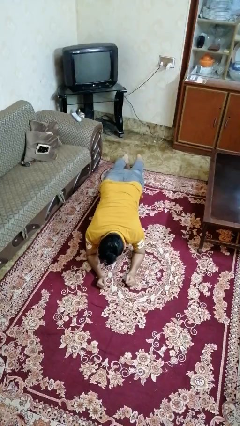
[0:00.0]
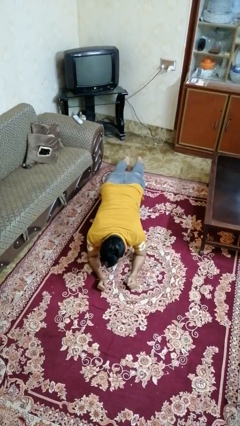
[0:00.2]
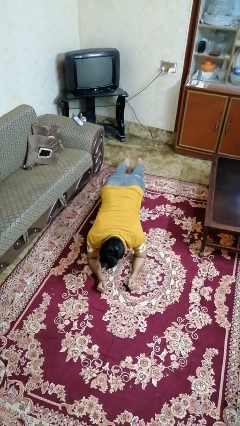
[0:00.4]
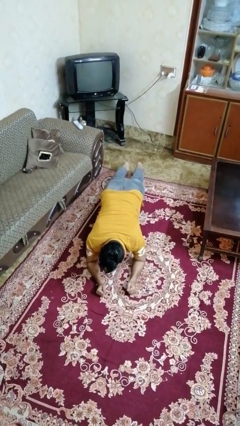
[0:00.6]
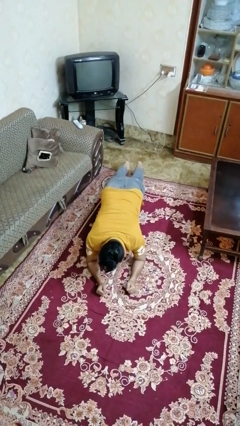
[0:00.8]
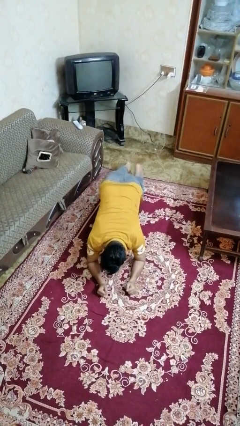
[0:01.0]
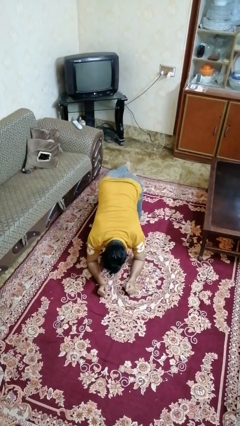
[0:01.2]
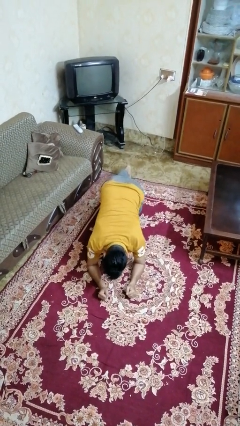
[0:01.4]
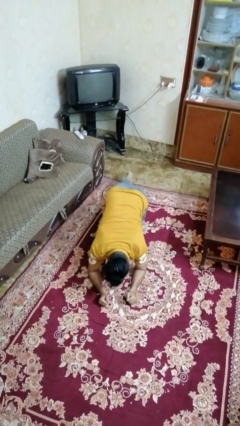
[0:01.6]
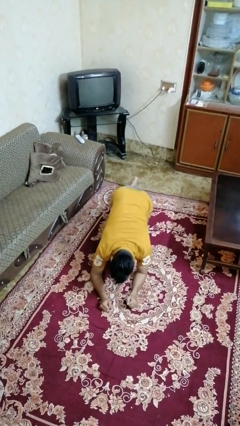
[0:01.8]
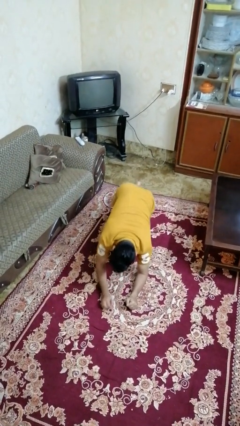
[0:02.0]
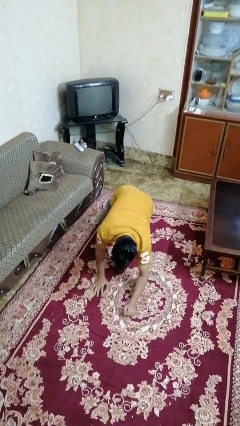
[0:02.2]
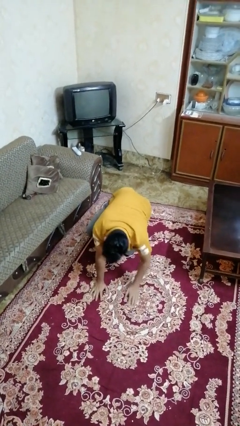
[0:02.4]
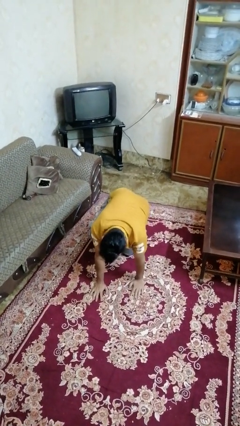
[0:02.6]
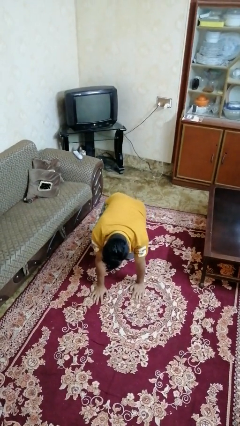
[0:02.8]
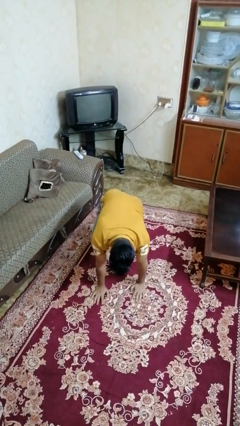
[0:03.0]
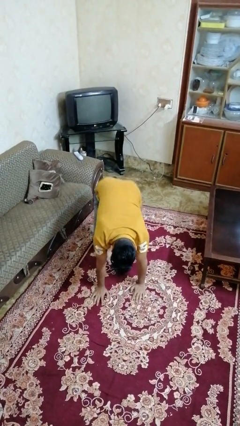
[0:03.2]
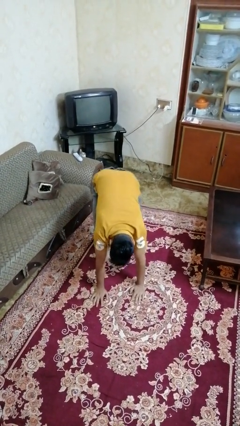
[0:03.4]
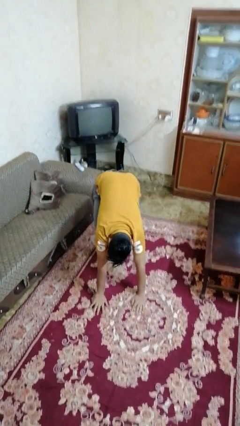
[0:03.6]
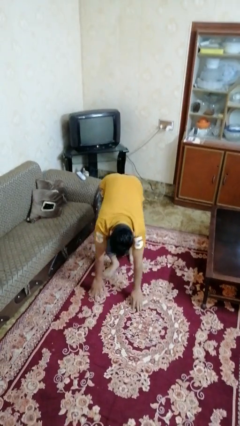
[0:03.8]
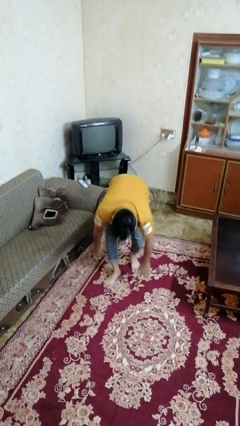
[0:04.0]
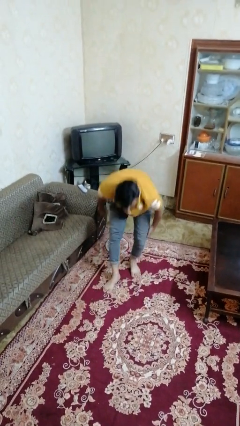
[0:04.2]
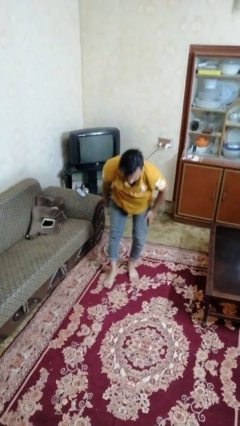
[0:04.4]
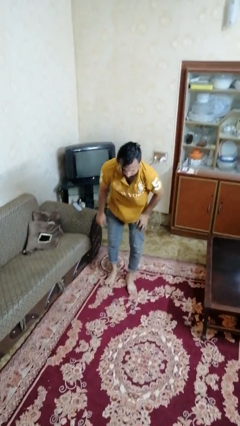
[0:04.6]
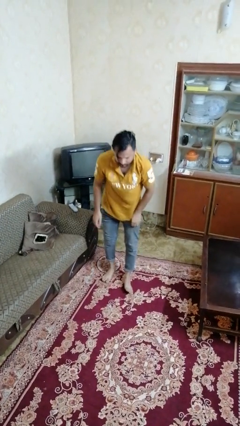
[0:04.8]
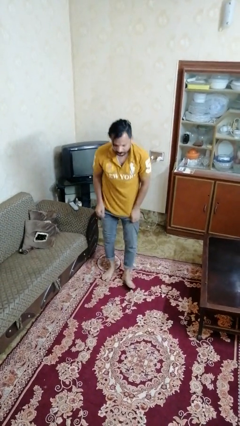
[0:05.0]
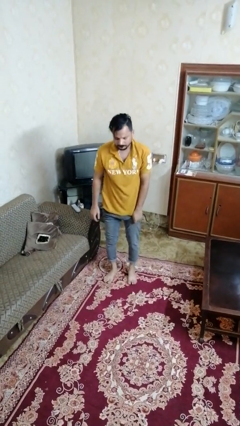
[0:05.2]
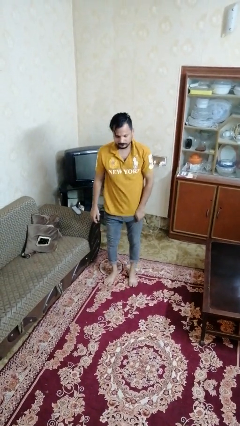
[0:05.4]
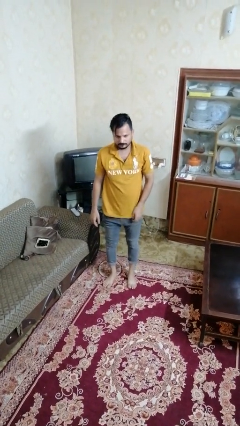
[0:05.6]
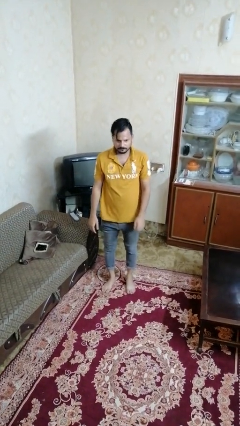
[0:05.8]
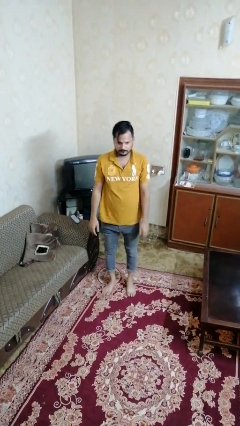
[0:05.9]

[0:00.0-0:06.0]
person stands up from floor

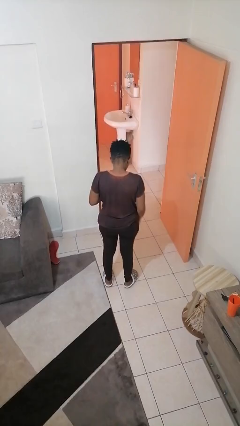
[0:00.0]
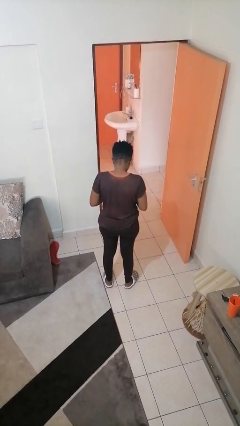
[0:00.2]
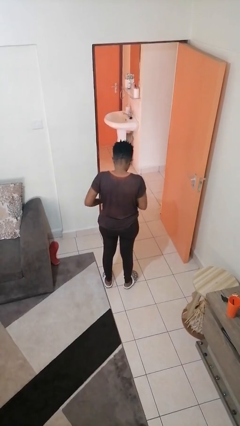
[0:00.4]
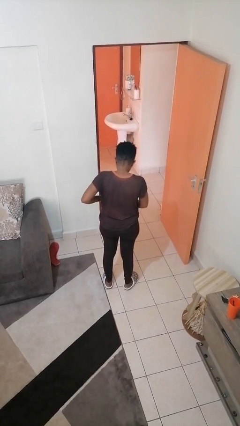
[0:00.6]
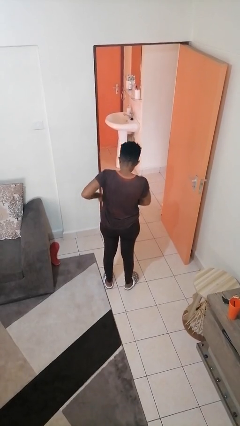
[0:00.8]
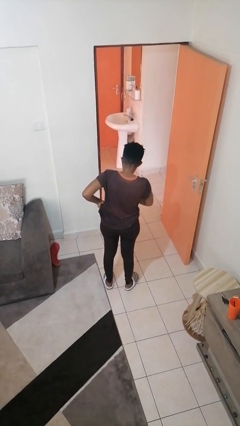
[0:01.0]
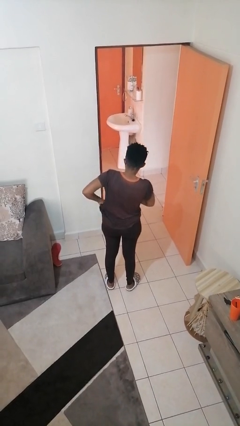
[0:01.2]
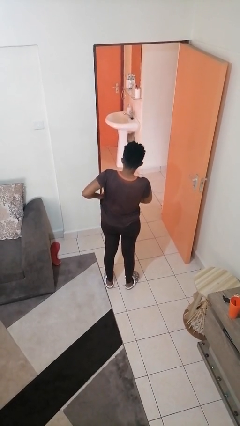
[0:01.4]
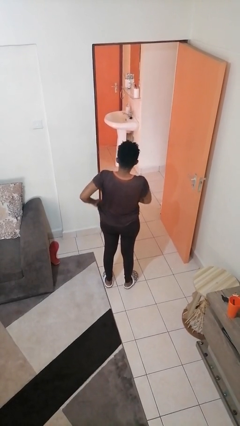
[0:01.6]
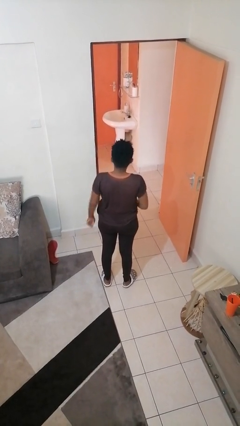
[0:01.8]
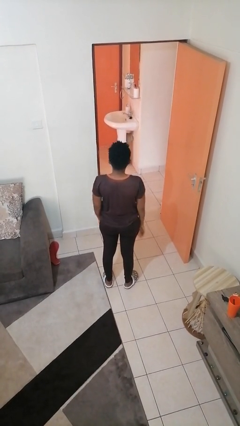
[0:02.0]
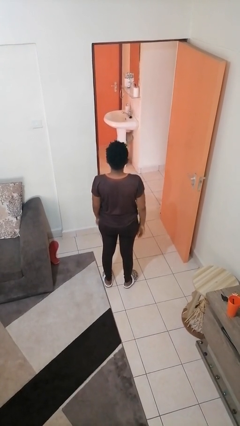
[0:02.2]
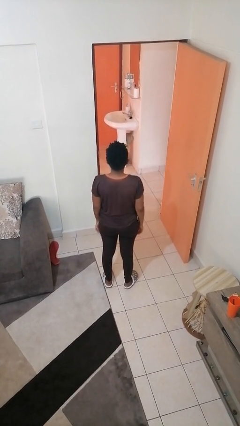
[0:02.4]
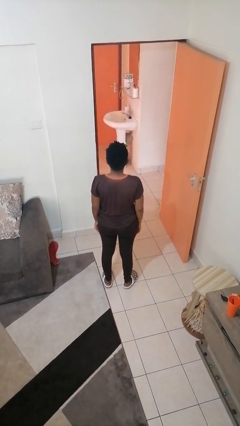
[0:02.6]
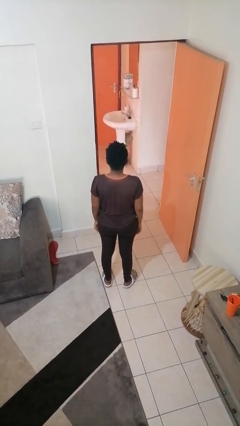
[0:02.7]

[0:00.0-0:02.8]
person puts phone into pocket

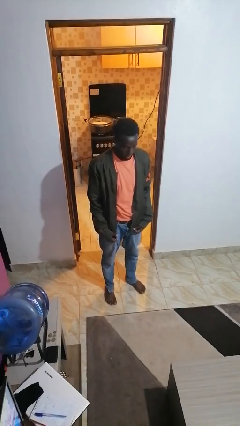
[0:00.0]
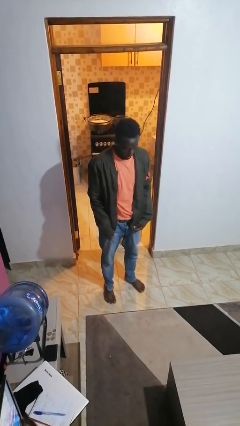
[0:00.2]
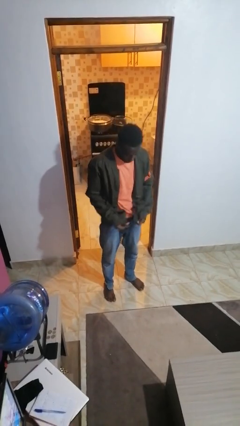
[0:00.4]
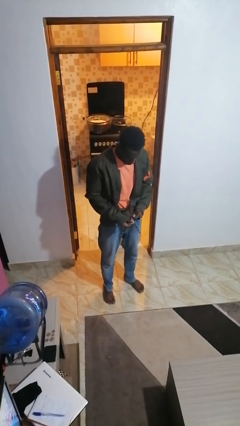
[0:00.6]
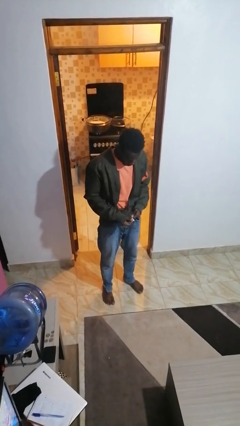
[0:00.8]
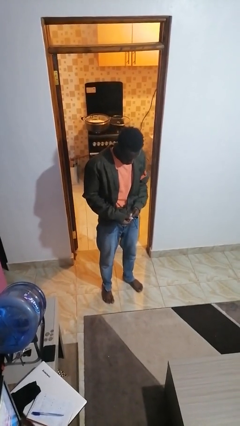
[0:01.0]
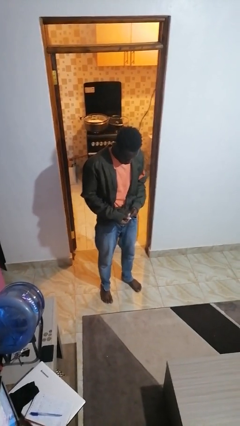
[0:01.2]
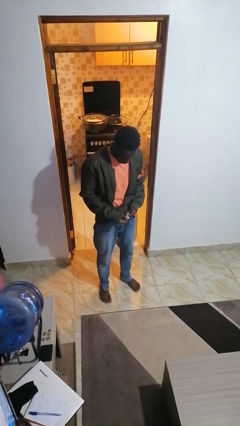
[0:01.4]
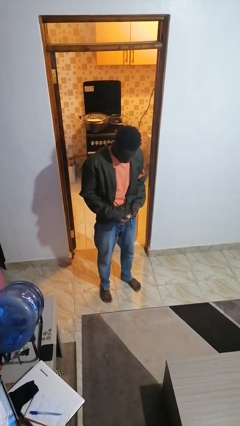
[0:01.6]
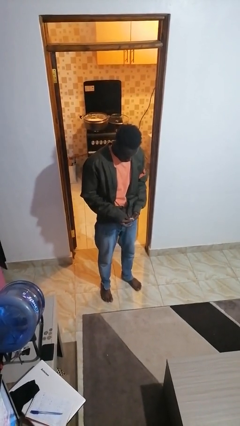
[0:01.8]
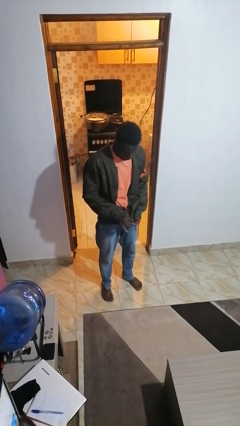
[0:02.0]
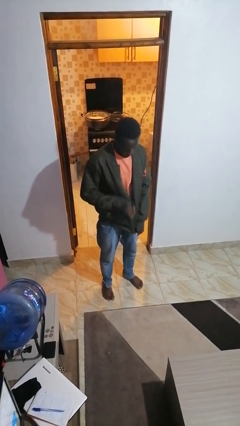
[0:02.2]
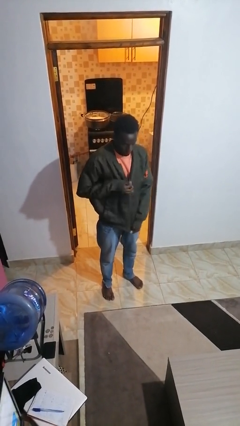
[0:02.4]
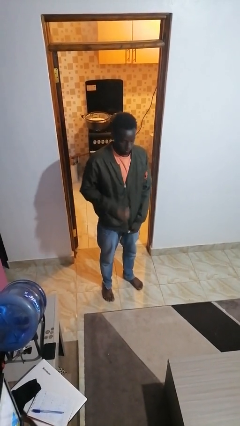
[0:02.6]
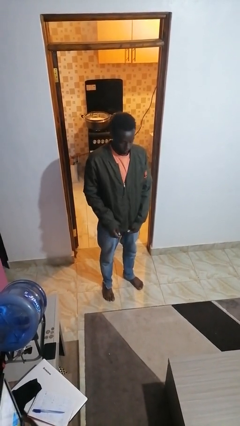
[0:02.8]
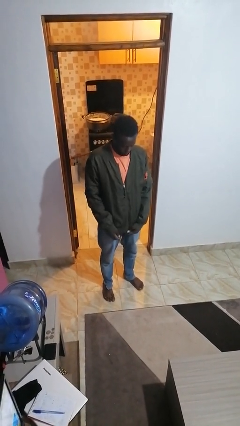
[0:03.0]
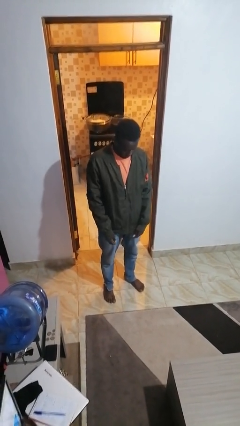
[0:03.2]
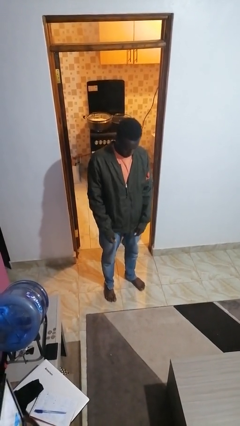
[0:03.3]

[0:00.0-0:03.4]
person zips up jacket

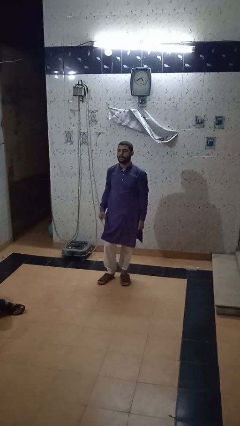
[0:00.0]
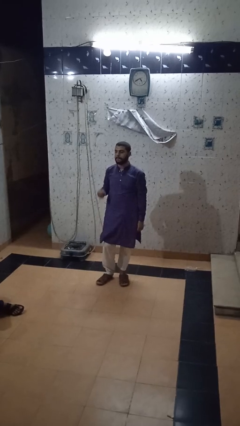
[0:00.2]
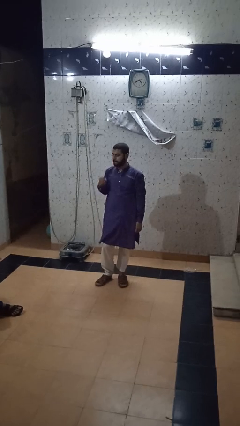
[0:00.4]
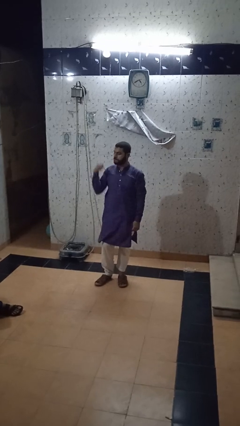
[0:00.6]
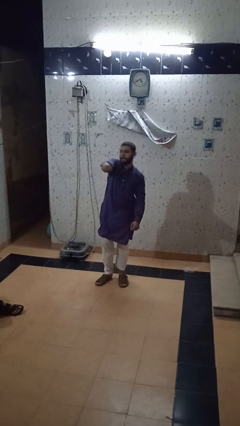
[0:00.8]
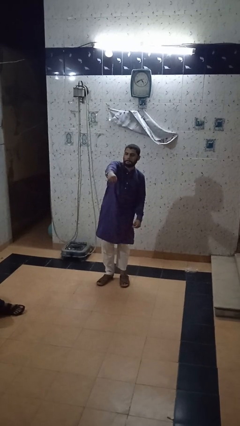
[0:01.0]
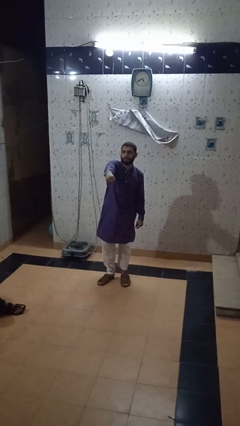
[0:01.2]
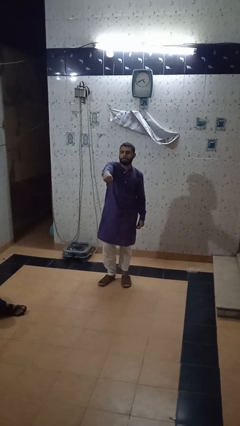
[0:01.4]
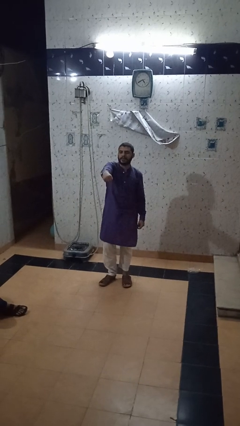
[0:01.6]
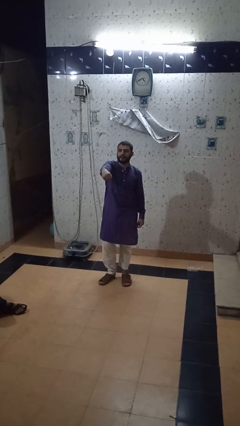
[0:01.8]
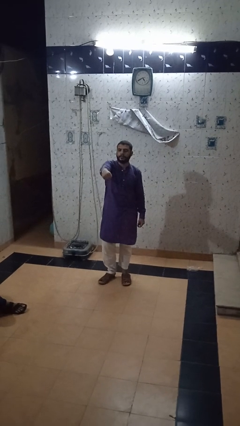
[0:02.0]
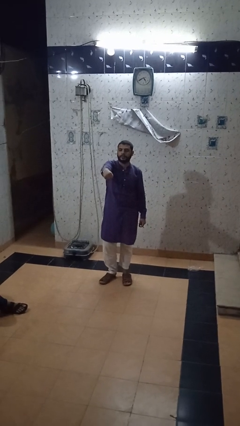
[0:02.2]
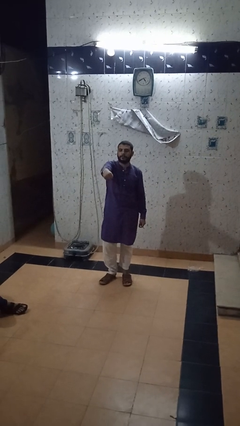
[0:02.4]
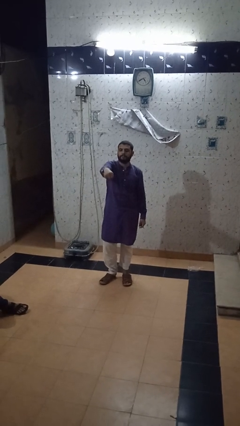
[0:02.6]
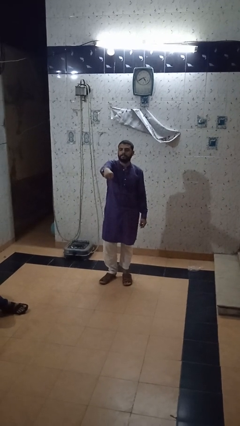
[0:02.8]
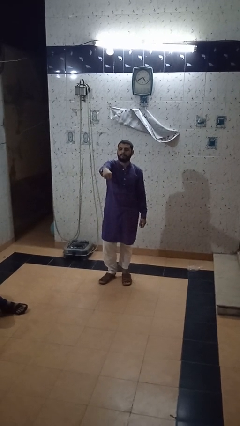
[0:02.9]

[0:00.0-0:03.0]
person punches

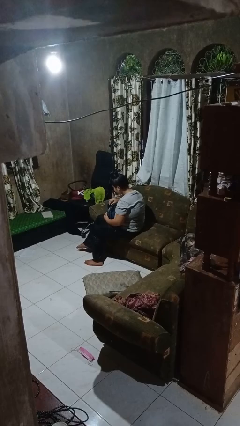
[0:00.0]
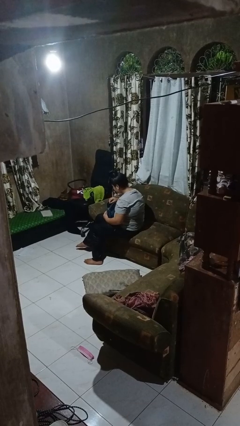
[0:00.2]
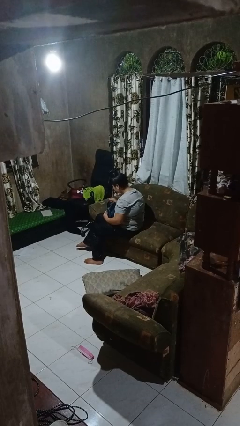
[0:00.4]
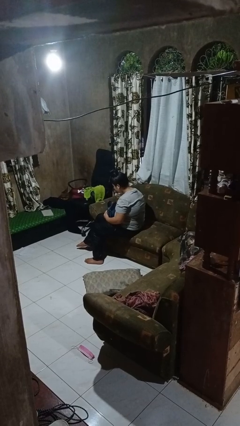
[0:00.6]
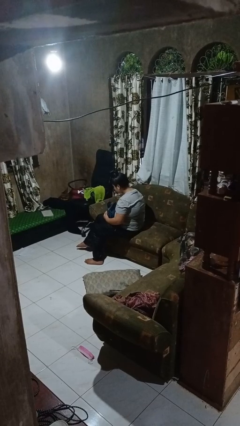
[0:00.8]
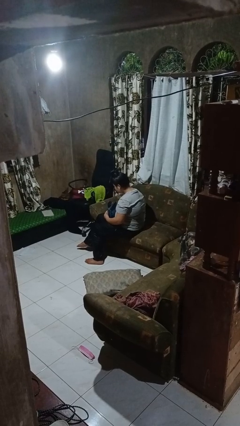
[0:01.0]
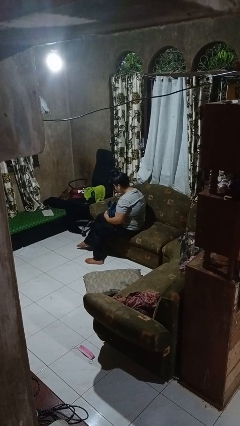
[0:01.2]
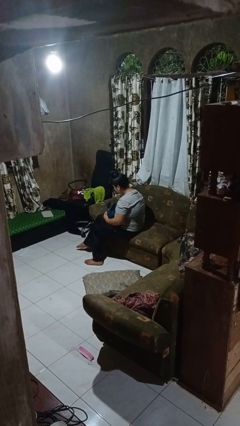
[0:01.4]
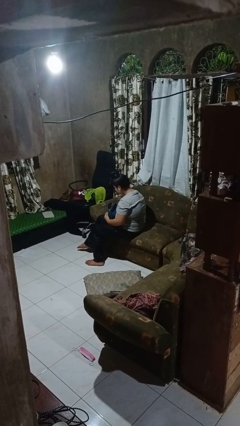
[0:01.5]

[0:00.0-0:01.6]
person puts object into purse

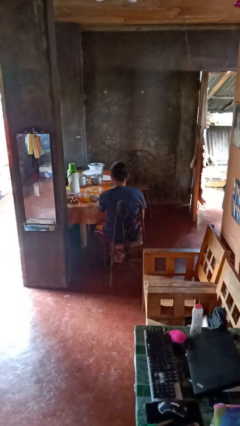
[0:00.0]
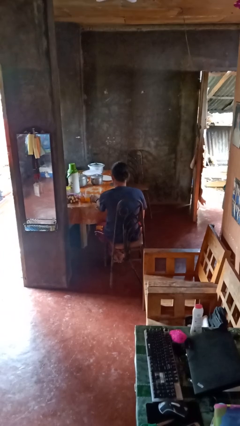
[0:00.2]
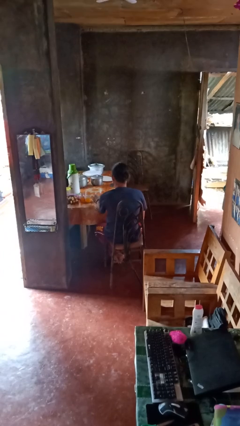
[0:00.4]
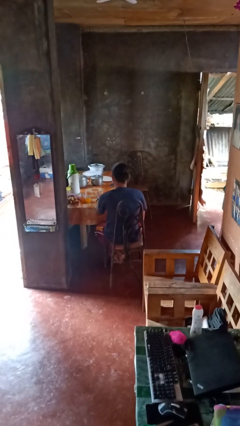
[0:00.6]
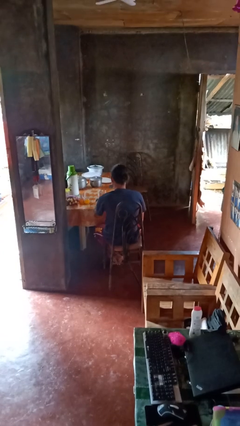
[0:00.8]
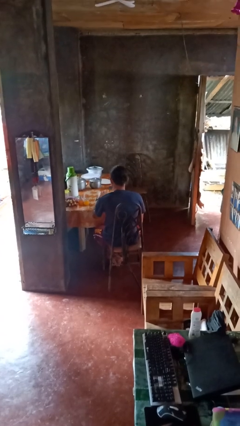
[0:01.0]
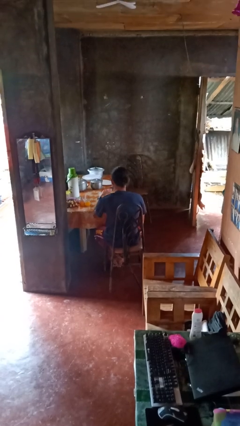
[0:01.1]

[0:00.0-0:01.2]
person picks up object from table
